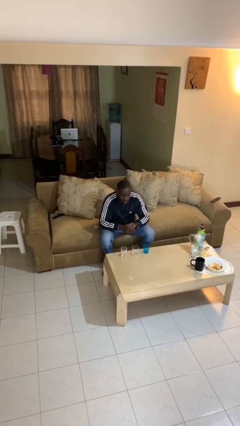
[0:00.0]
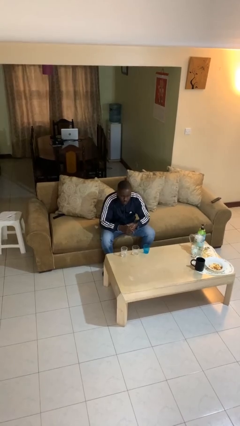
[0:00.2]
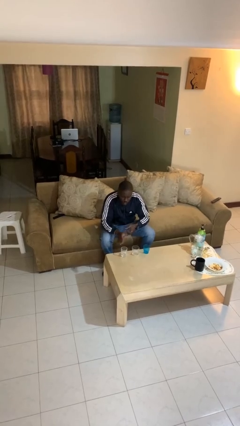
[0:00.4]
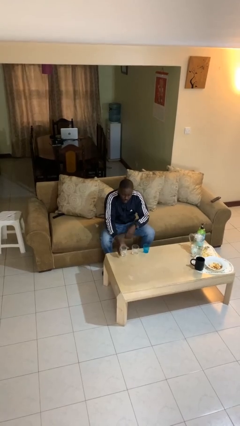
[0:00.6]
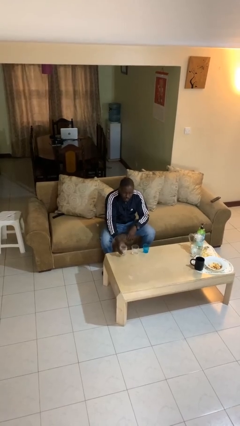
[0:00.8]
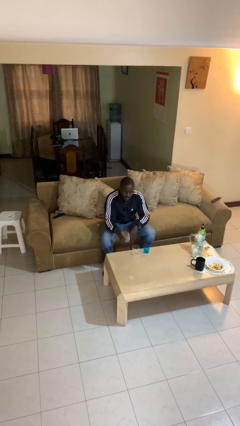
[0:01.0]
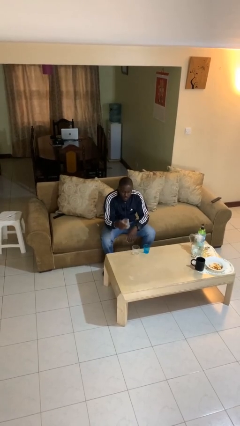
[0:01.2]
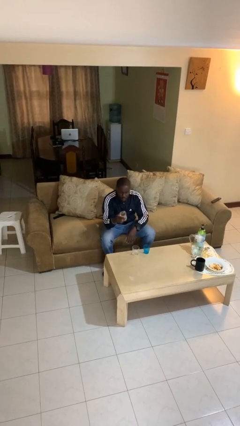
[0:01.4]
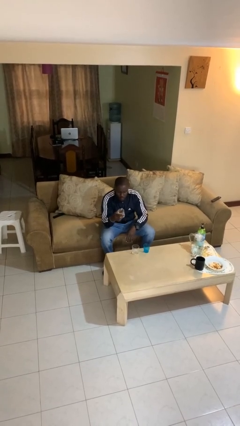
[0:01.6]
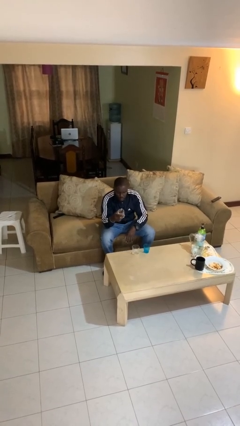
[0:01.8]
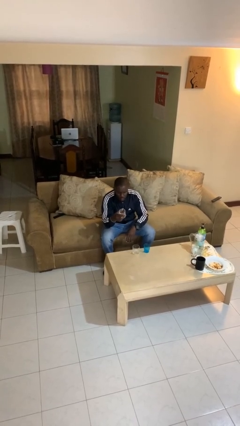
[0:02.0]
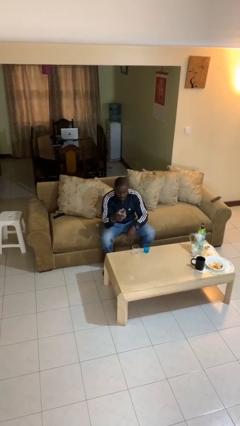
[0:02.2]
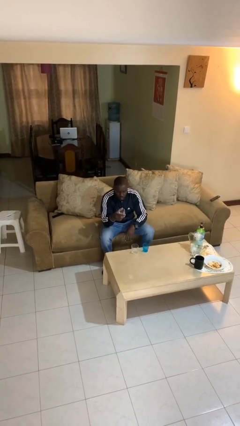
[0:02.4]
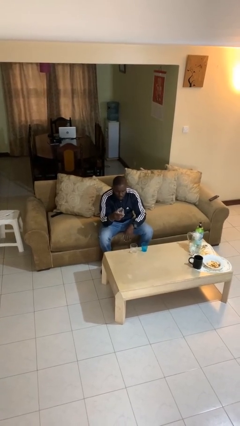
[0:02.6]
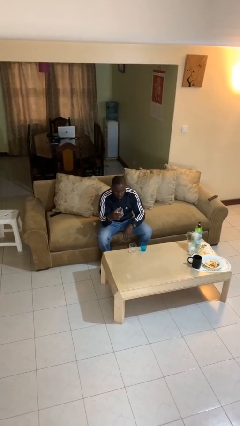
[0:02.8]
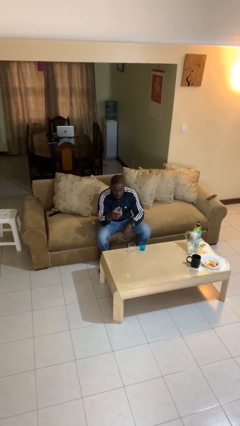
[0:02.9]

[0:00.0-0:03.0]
person picks up object from table

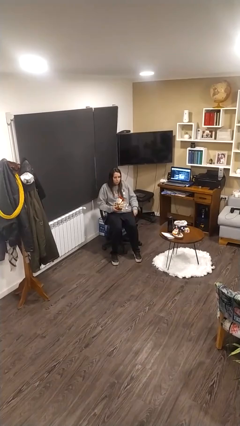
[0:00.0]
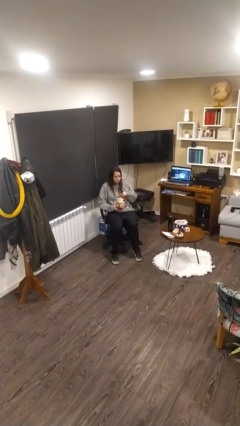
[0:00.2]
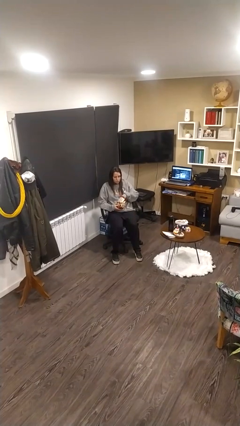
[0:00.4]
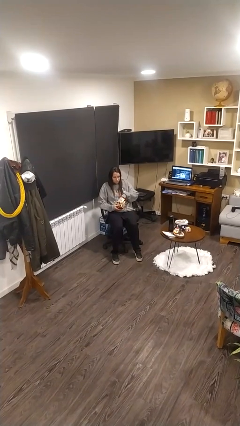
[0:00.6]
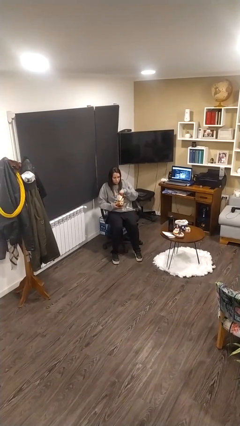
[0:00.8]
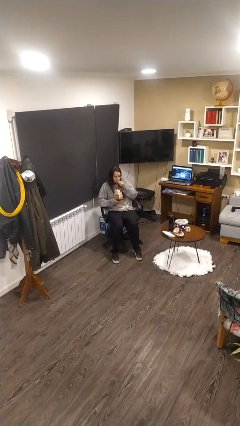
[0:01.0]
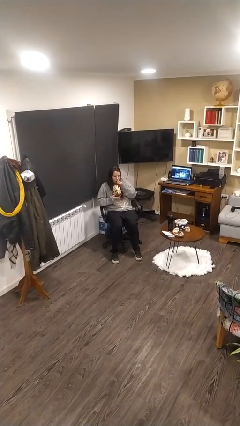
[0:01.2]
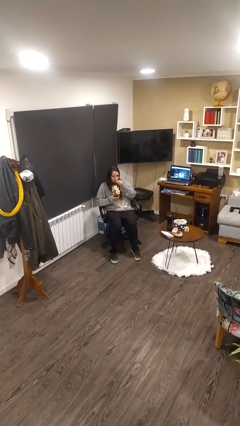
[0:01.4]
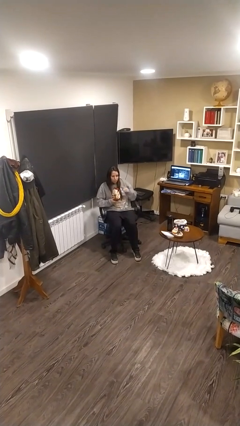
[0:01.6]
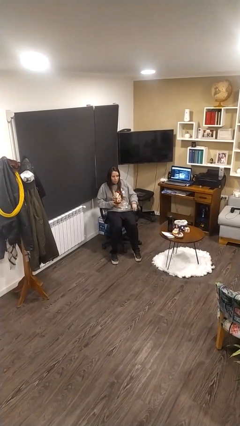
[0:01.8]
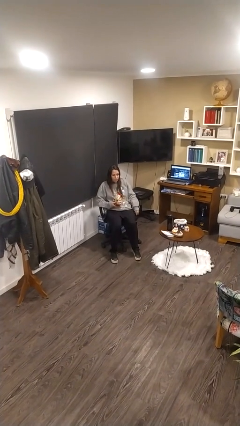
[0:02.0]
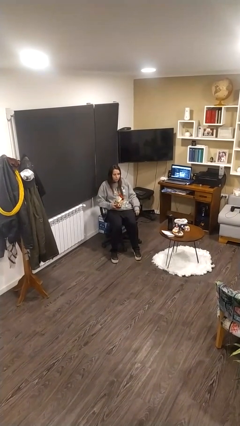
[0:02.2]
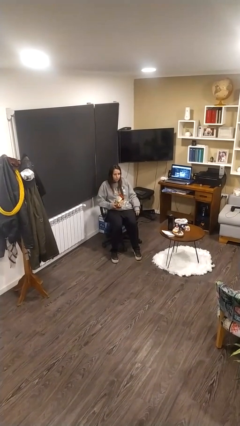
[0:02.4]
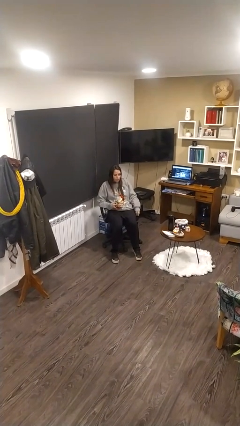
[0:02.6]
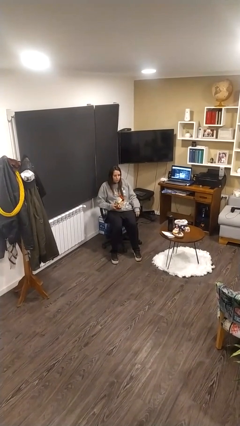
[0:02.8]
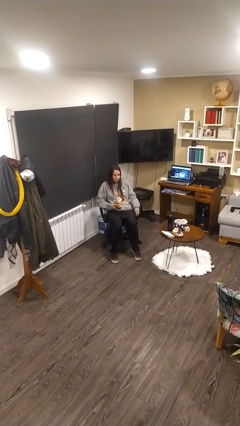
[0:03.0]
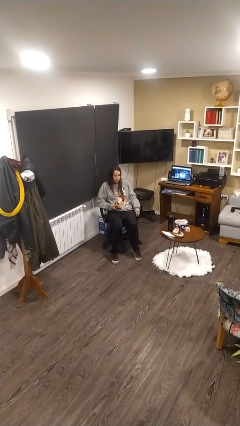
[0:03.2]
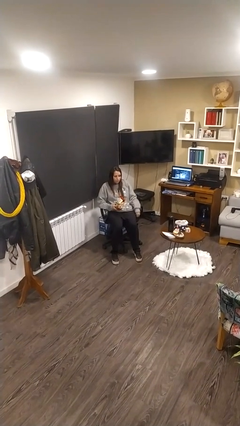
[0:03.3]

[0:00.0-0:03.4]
person eats snack from bag

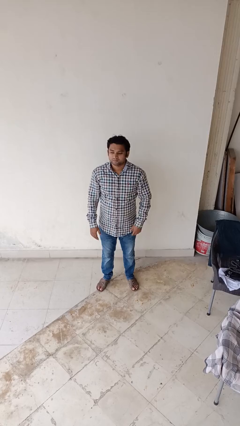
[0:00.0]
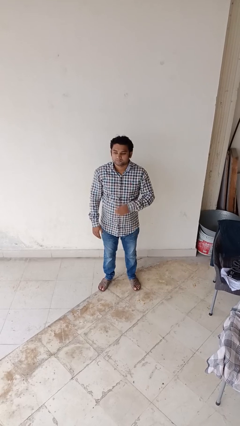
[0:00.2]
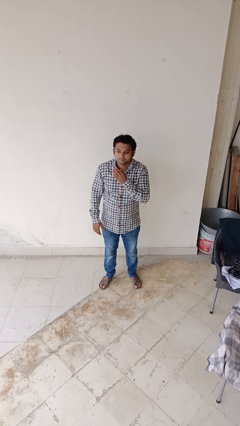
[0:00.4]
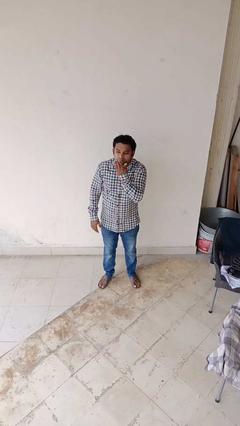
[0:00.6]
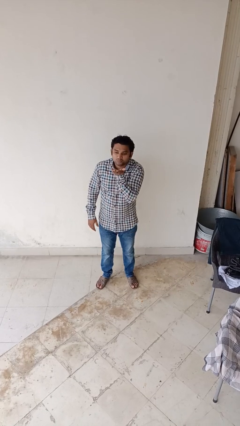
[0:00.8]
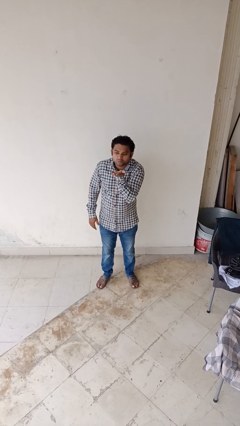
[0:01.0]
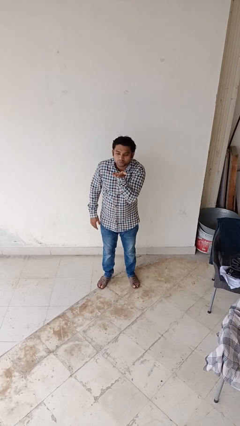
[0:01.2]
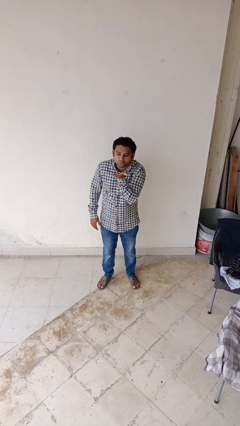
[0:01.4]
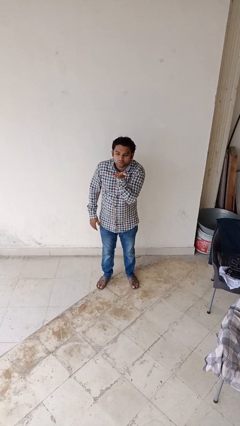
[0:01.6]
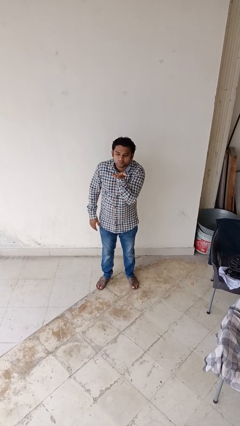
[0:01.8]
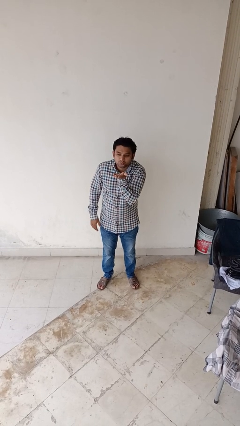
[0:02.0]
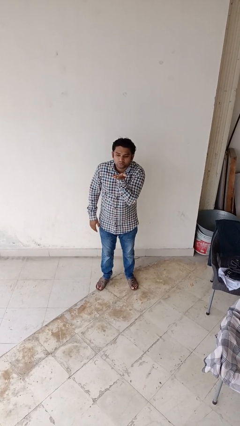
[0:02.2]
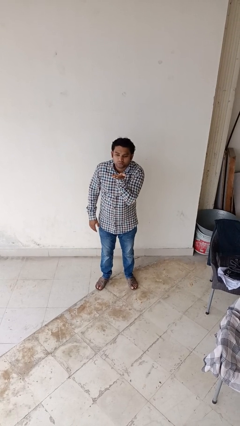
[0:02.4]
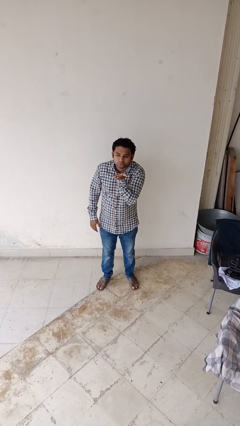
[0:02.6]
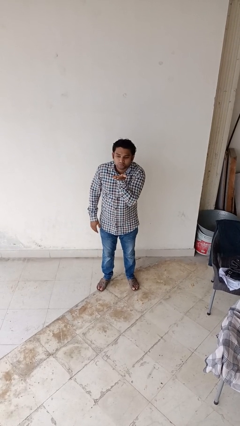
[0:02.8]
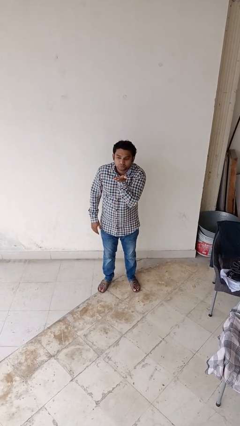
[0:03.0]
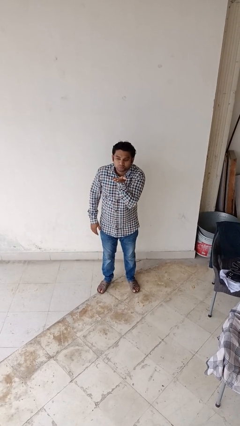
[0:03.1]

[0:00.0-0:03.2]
person gestures blow kiss

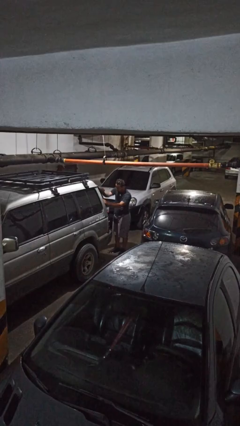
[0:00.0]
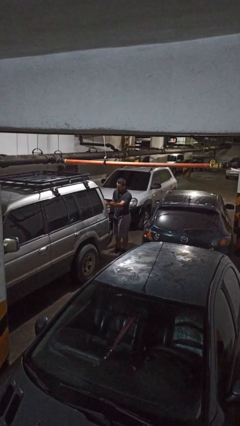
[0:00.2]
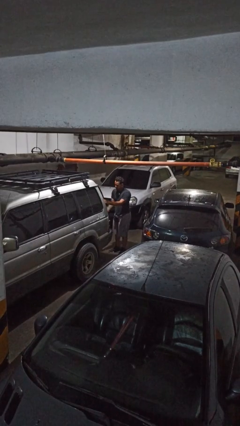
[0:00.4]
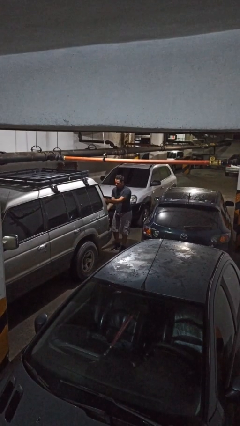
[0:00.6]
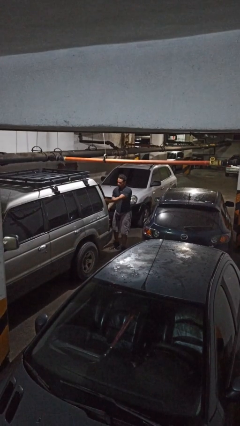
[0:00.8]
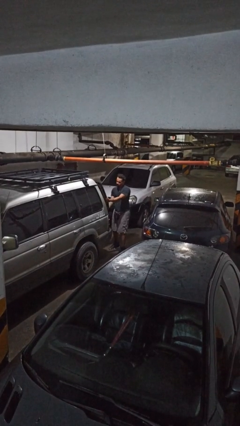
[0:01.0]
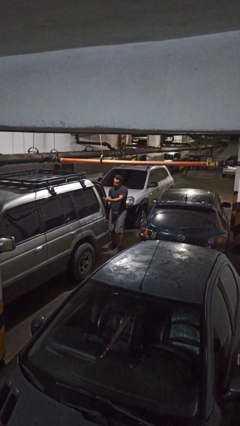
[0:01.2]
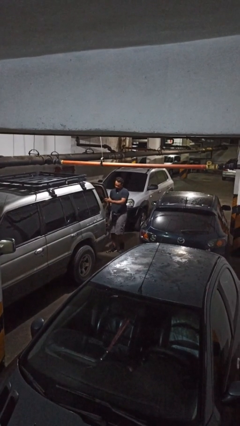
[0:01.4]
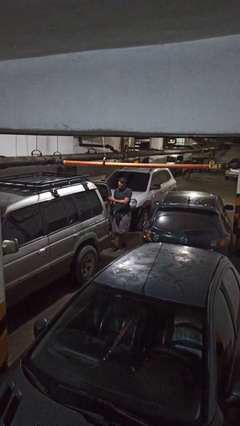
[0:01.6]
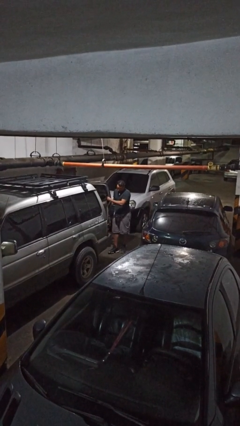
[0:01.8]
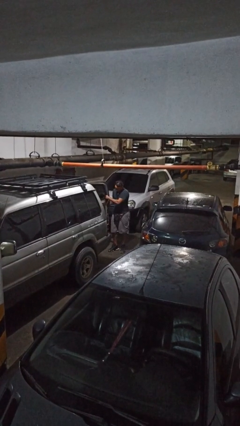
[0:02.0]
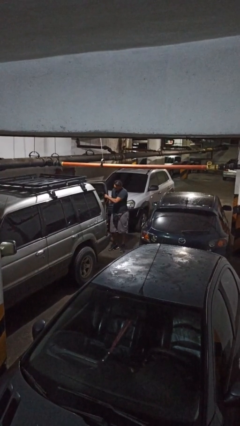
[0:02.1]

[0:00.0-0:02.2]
person opens car trunk

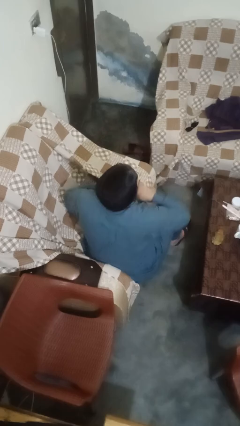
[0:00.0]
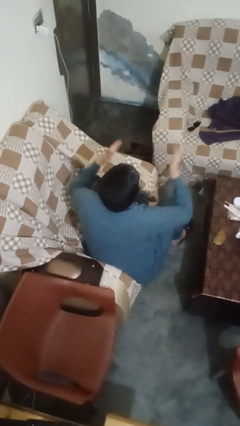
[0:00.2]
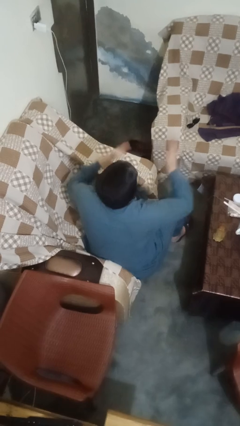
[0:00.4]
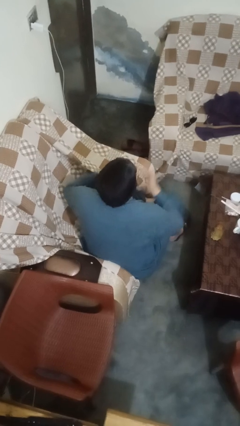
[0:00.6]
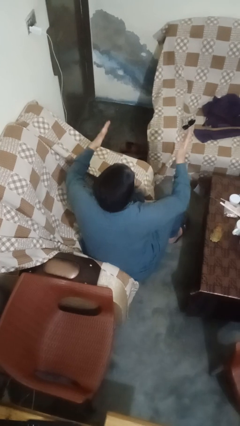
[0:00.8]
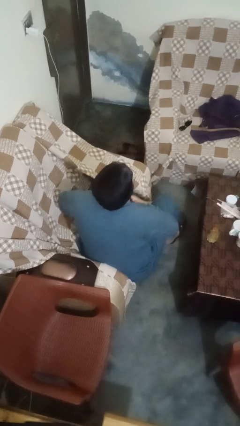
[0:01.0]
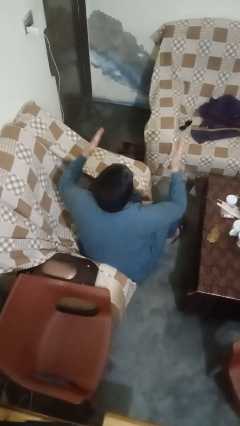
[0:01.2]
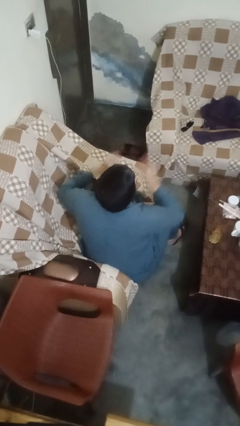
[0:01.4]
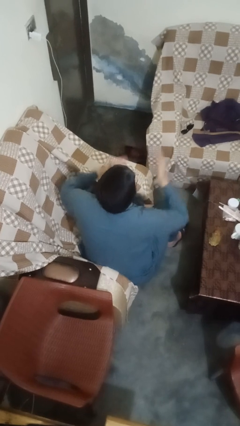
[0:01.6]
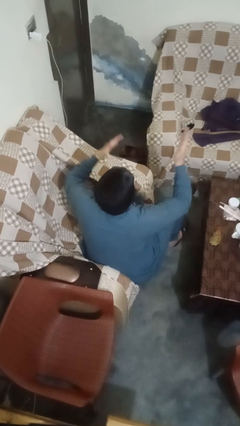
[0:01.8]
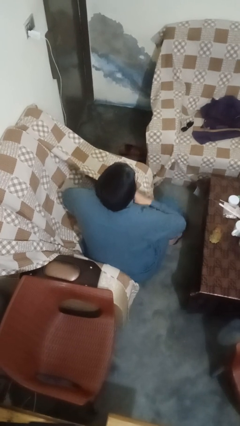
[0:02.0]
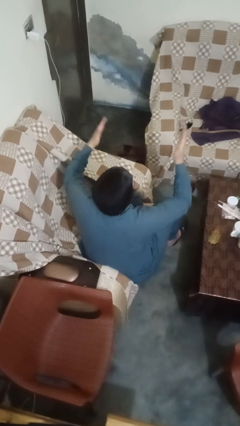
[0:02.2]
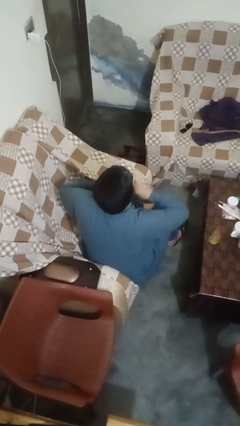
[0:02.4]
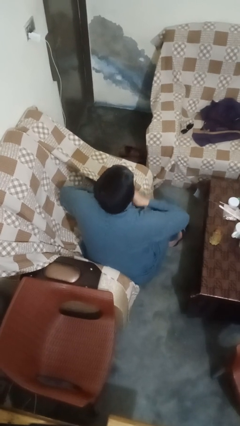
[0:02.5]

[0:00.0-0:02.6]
person drums on chest

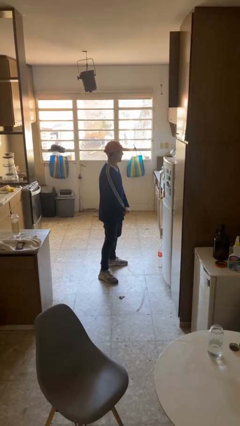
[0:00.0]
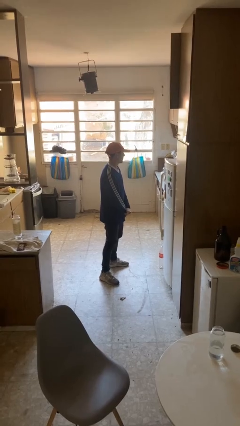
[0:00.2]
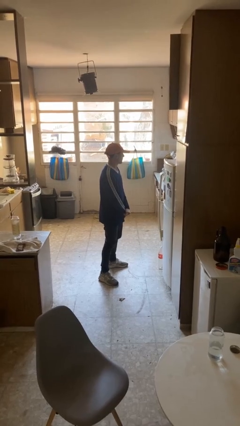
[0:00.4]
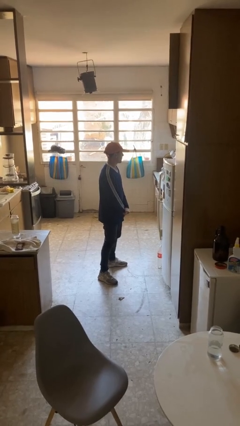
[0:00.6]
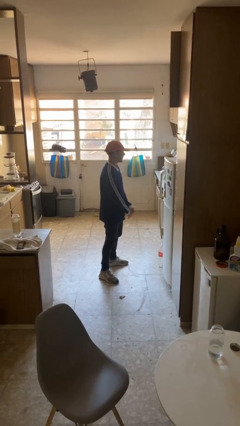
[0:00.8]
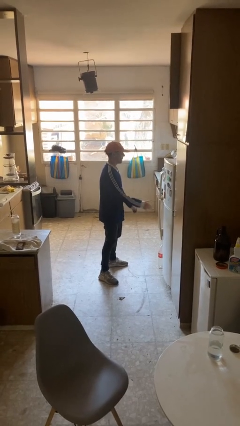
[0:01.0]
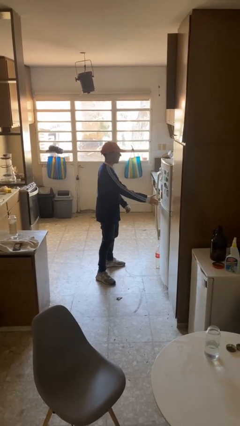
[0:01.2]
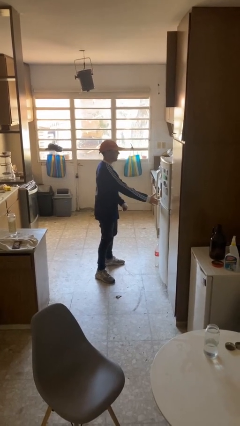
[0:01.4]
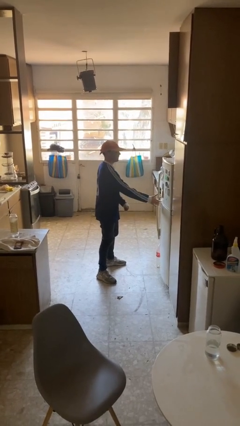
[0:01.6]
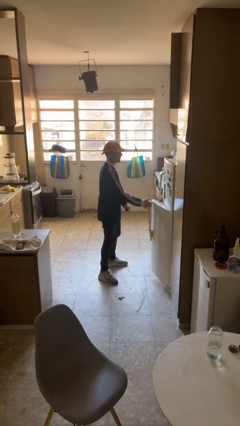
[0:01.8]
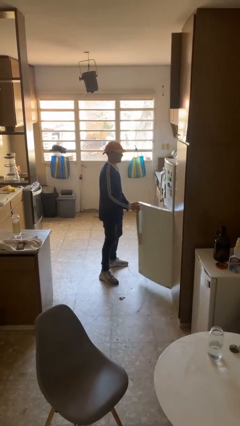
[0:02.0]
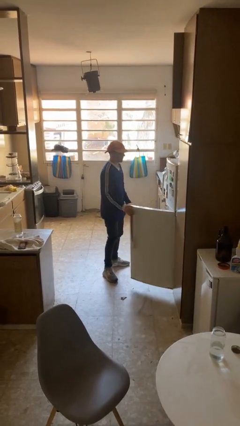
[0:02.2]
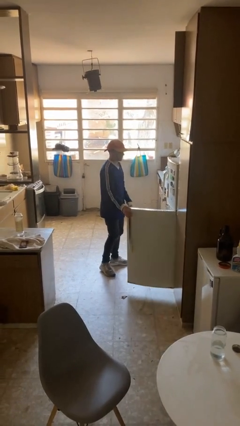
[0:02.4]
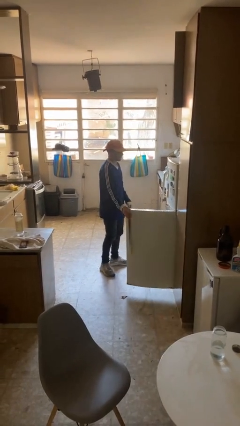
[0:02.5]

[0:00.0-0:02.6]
person opens refrigerator
